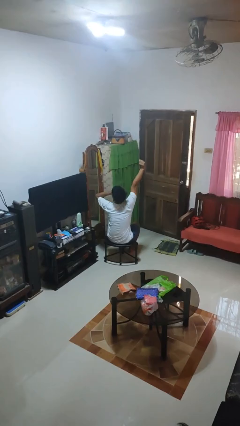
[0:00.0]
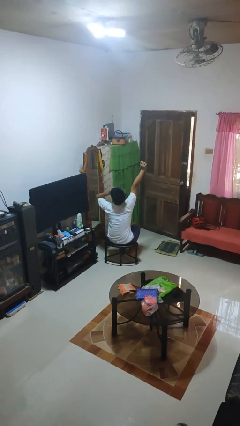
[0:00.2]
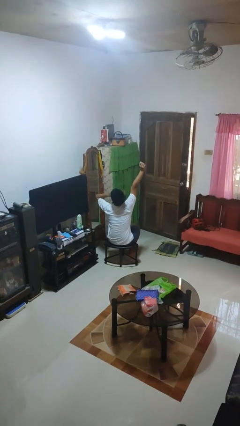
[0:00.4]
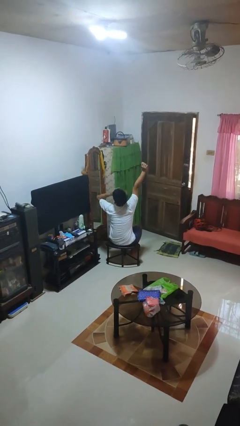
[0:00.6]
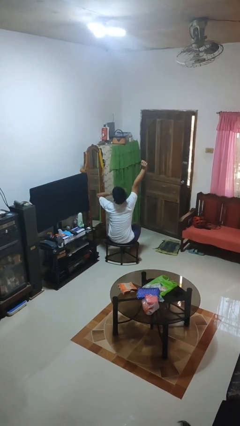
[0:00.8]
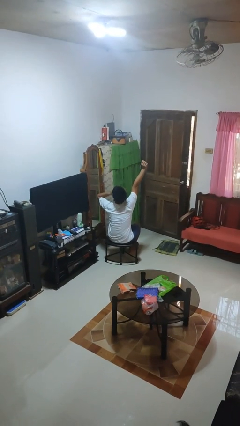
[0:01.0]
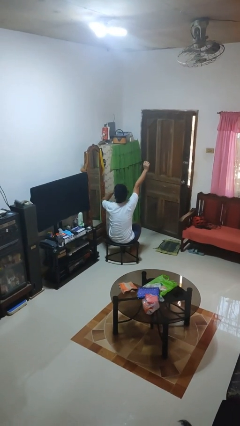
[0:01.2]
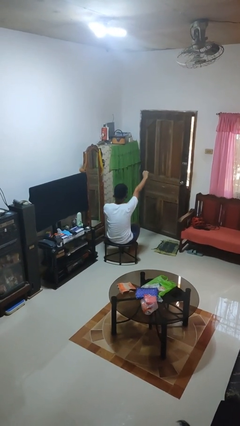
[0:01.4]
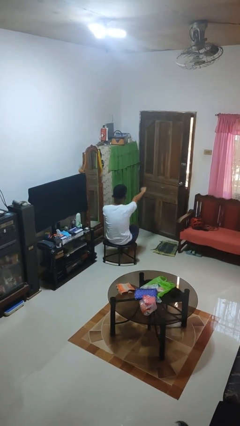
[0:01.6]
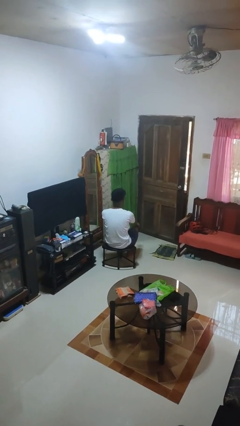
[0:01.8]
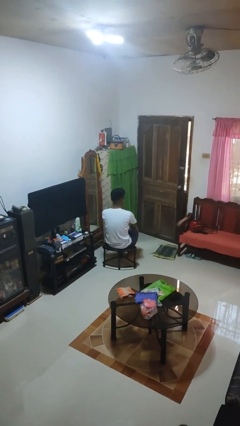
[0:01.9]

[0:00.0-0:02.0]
person yawns

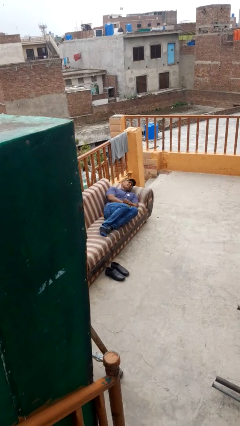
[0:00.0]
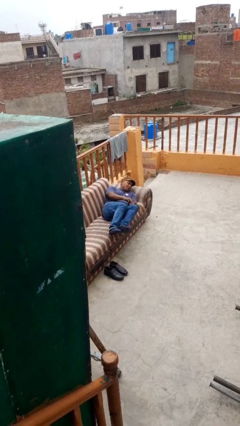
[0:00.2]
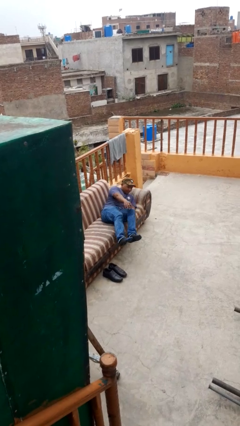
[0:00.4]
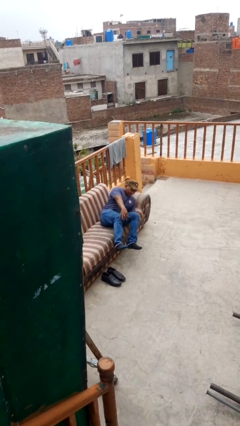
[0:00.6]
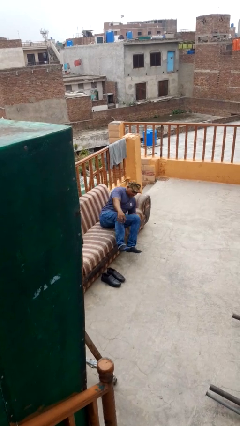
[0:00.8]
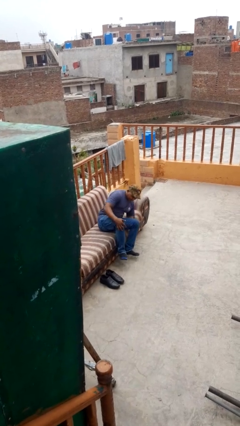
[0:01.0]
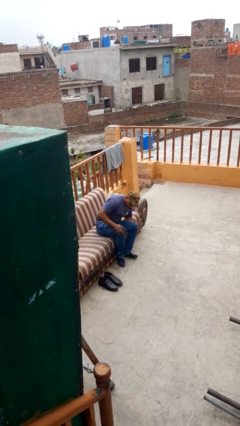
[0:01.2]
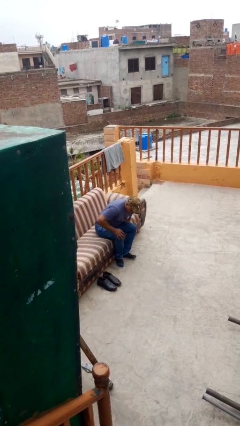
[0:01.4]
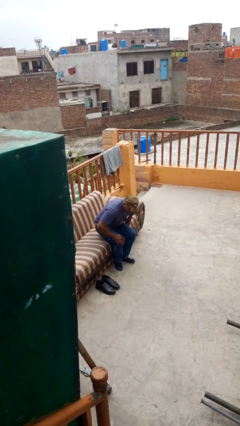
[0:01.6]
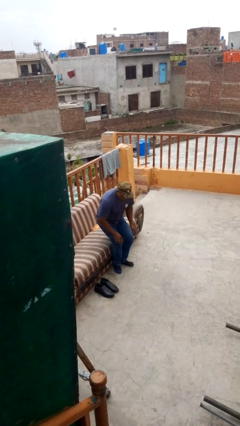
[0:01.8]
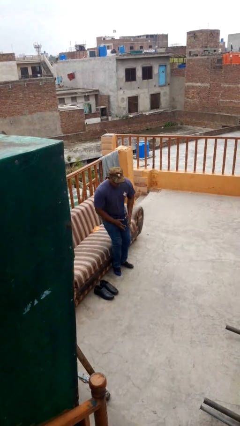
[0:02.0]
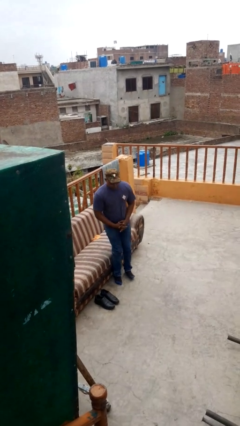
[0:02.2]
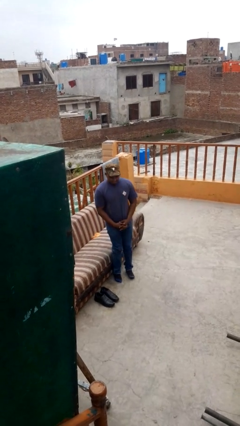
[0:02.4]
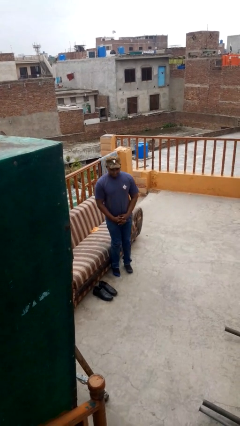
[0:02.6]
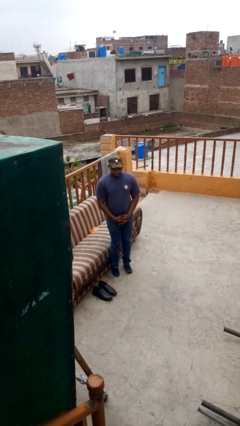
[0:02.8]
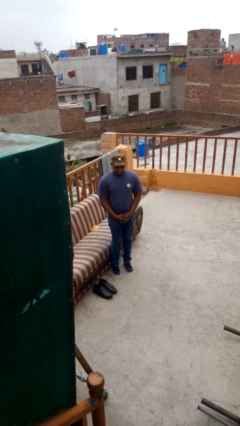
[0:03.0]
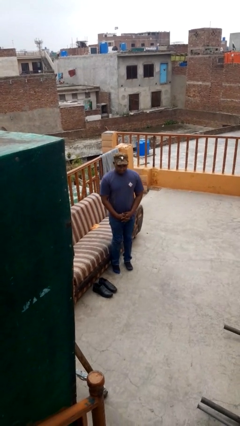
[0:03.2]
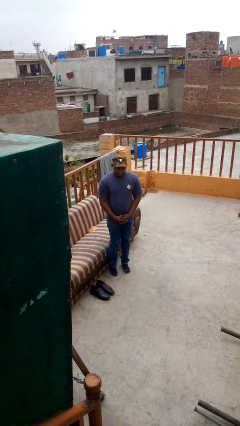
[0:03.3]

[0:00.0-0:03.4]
person stands up

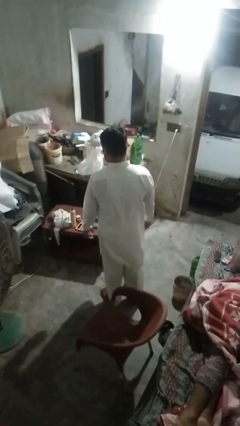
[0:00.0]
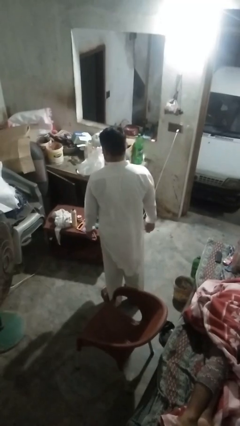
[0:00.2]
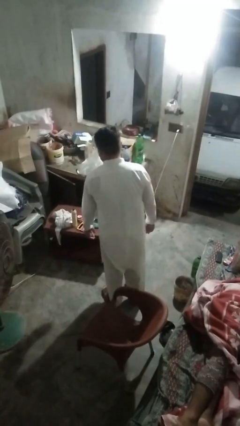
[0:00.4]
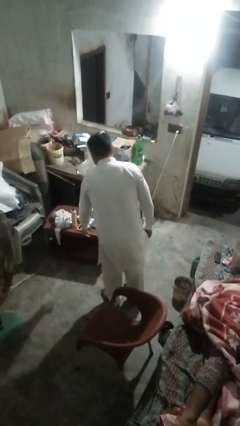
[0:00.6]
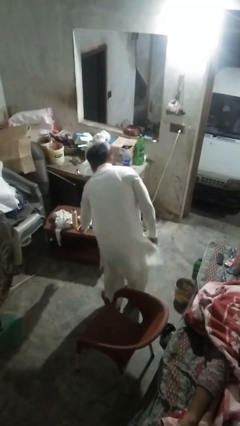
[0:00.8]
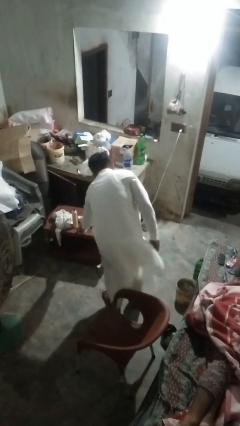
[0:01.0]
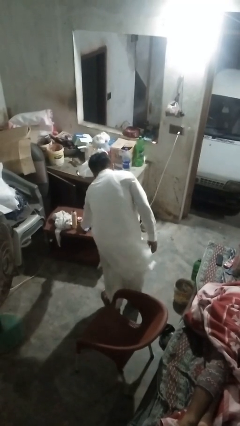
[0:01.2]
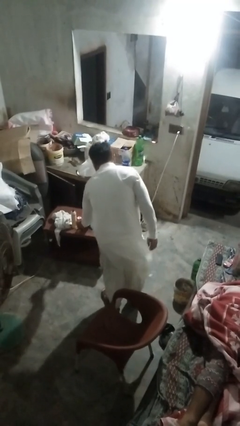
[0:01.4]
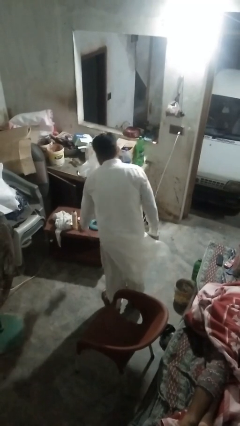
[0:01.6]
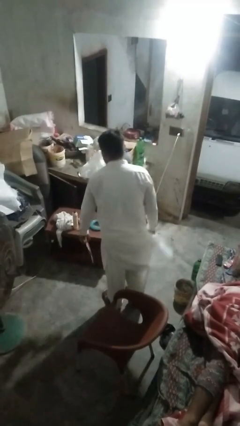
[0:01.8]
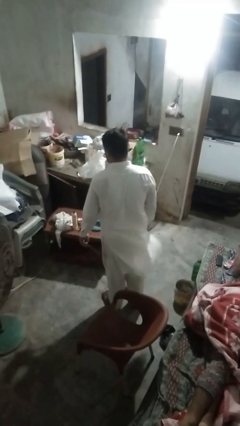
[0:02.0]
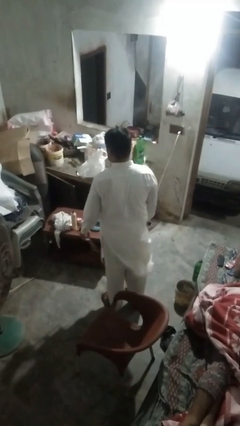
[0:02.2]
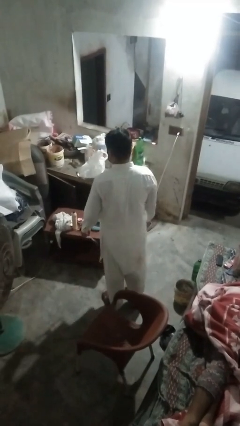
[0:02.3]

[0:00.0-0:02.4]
person picks up object from table

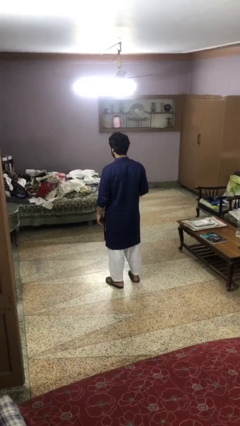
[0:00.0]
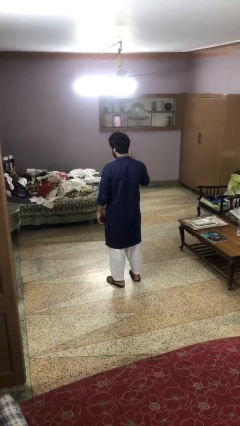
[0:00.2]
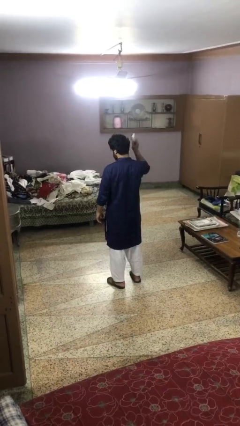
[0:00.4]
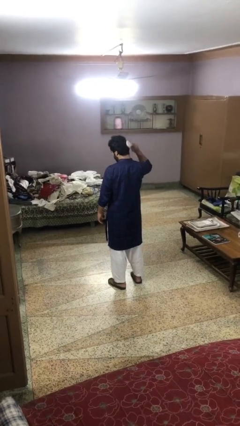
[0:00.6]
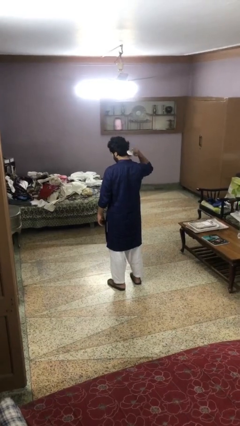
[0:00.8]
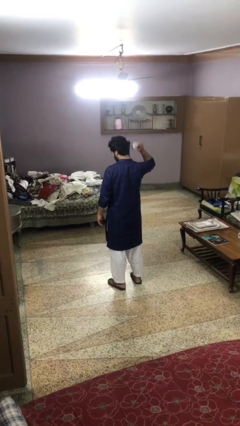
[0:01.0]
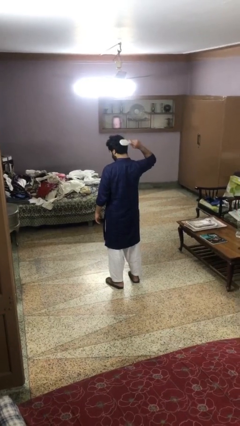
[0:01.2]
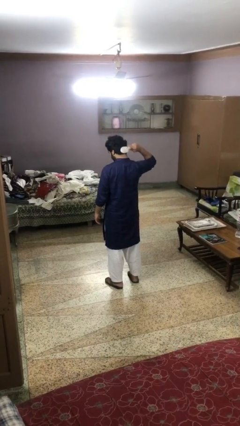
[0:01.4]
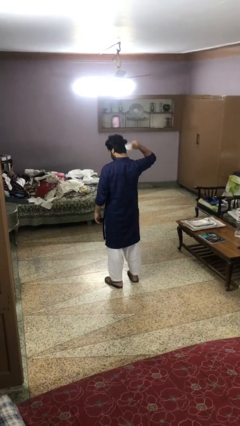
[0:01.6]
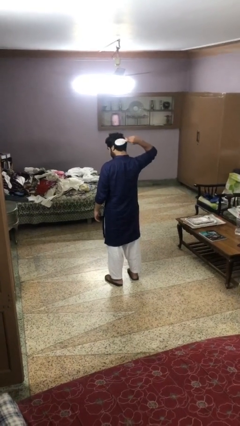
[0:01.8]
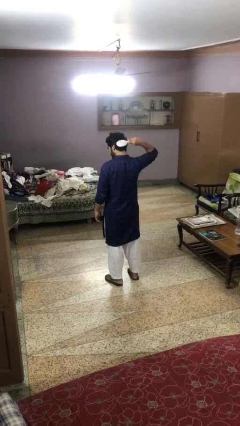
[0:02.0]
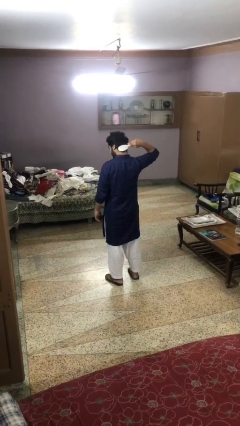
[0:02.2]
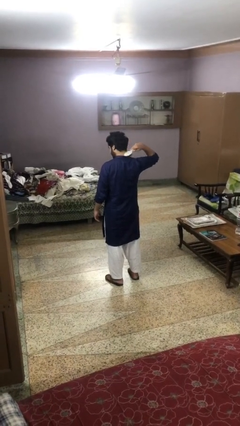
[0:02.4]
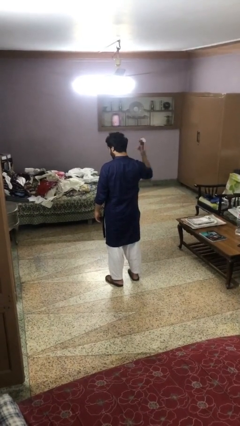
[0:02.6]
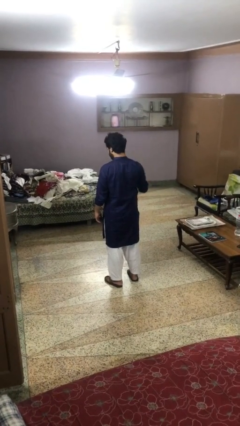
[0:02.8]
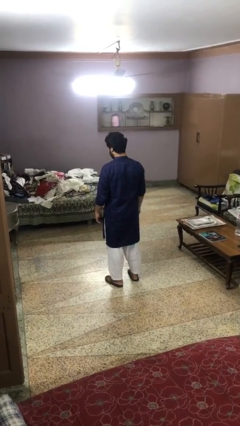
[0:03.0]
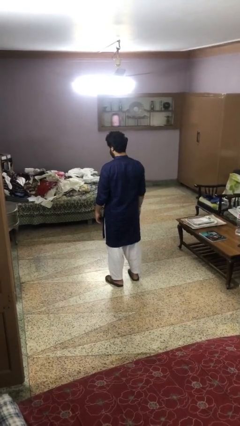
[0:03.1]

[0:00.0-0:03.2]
person brushes hair

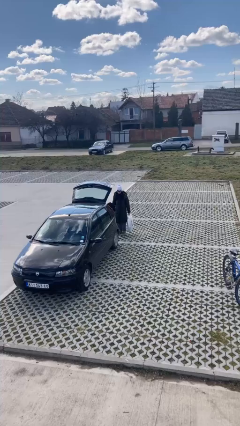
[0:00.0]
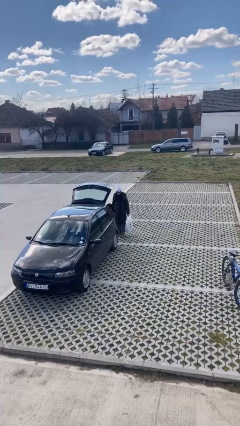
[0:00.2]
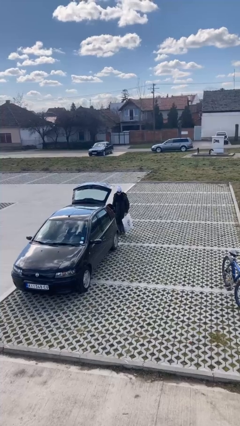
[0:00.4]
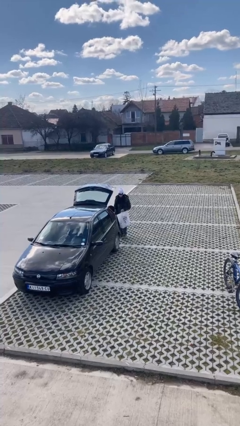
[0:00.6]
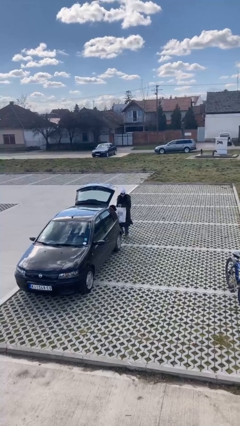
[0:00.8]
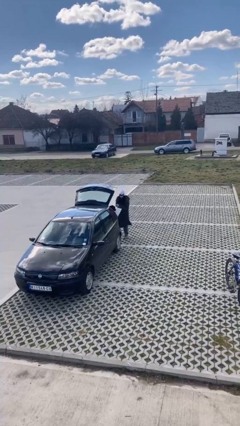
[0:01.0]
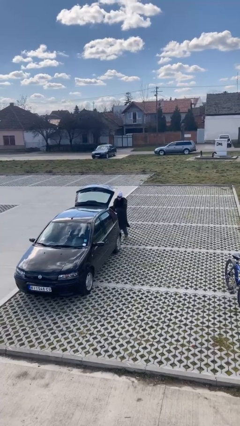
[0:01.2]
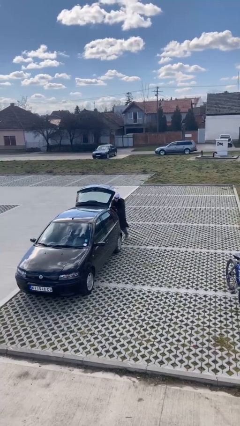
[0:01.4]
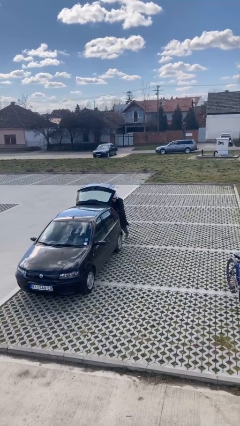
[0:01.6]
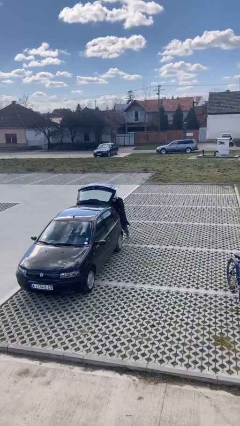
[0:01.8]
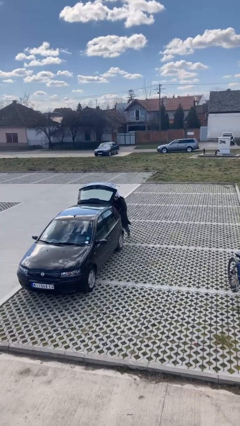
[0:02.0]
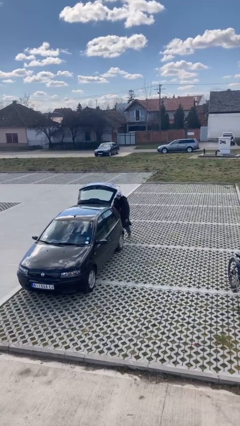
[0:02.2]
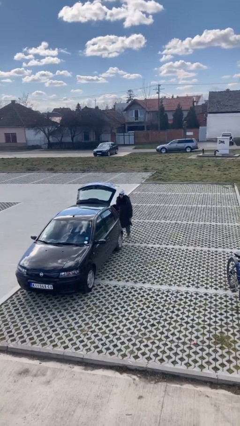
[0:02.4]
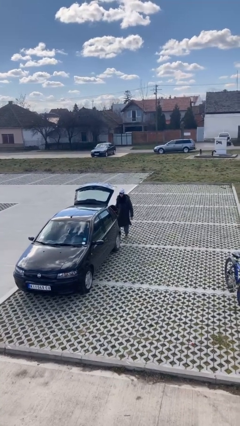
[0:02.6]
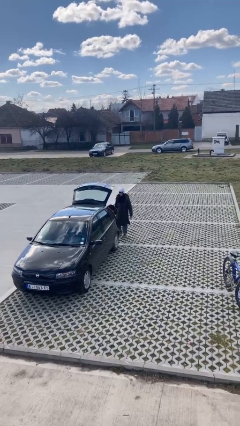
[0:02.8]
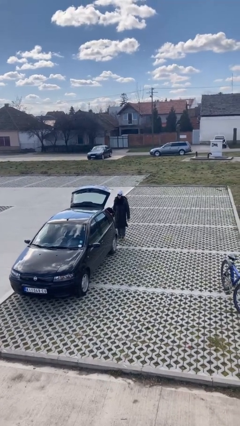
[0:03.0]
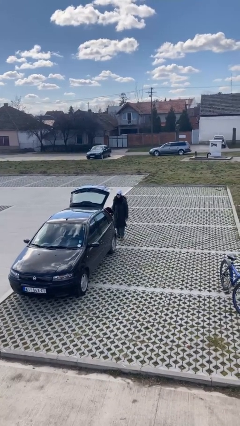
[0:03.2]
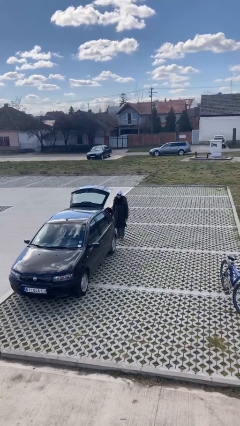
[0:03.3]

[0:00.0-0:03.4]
person loads car

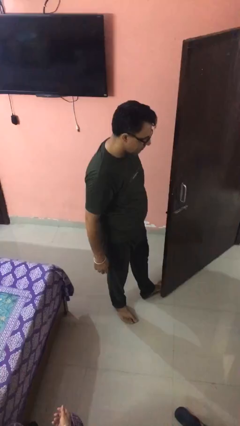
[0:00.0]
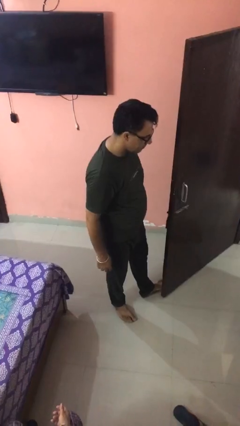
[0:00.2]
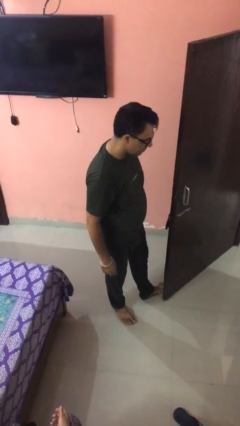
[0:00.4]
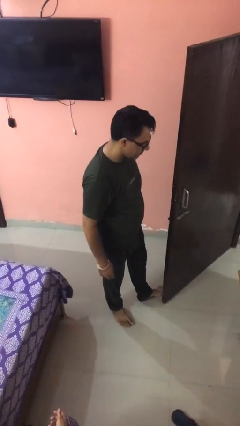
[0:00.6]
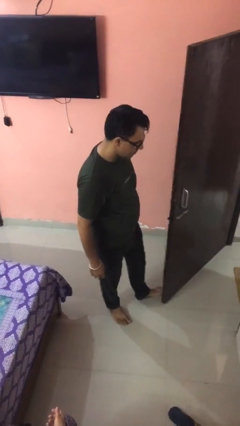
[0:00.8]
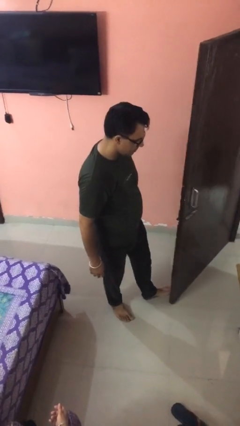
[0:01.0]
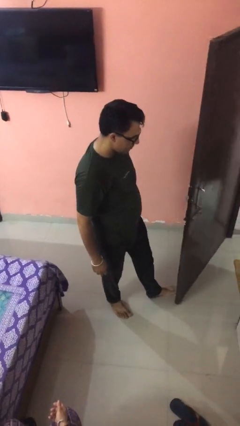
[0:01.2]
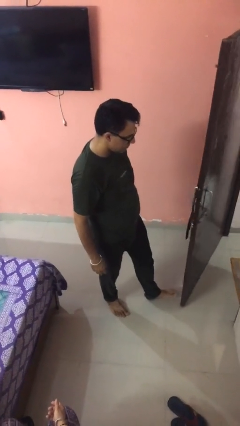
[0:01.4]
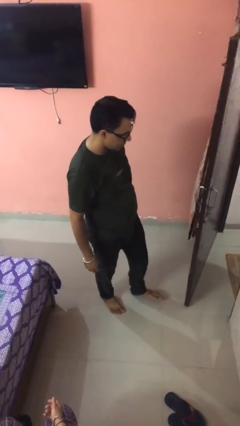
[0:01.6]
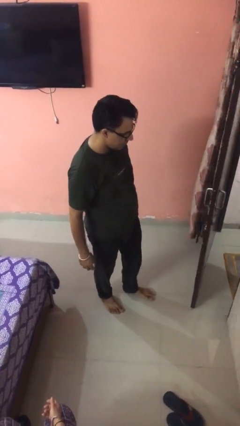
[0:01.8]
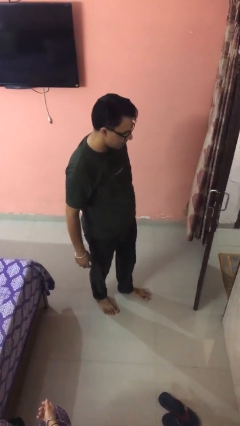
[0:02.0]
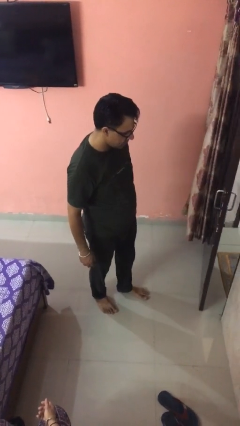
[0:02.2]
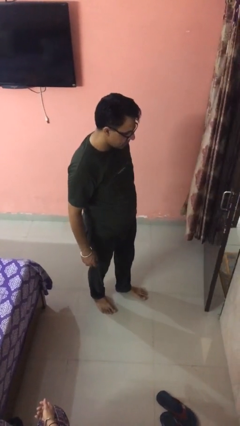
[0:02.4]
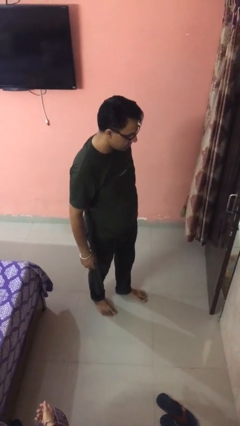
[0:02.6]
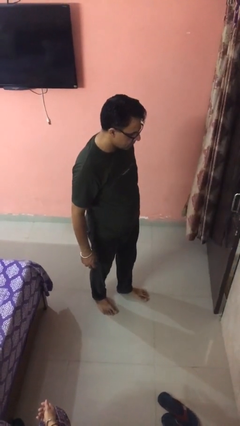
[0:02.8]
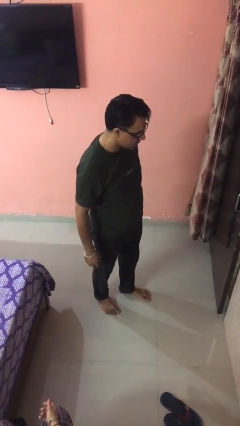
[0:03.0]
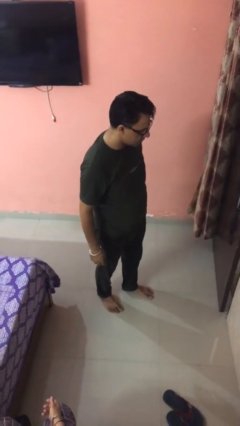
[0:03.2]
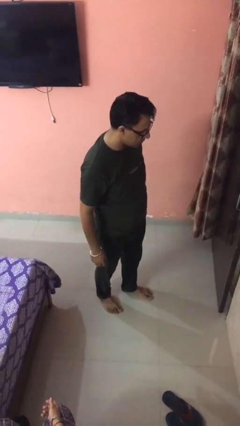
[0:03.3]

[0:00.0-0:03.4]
person closes door with foot
